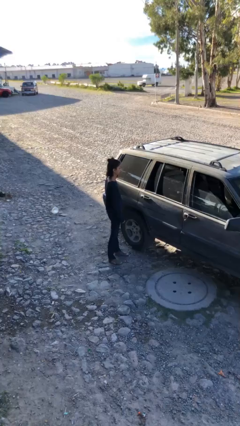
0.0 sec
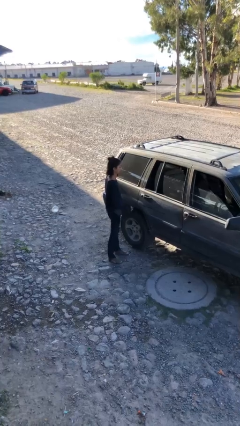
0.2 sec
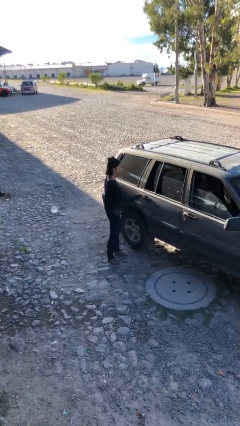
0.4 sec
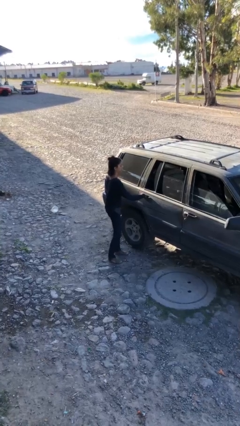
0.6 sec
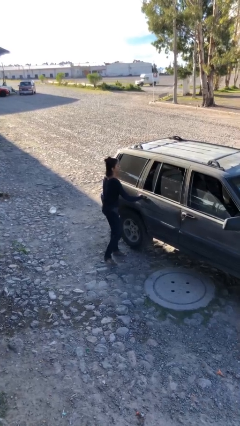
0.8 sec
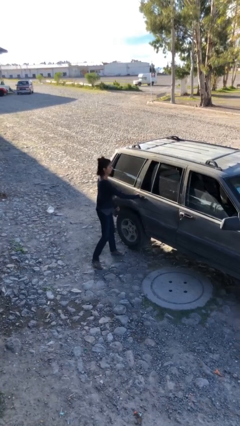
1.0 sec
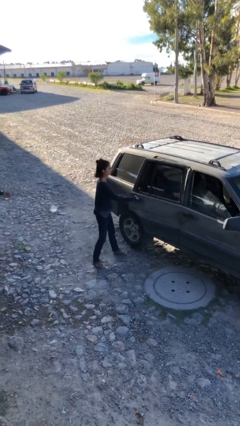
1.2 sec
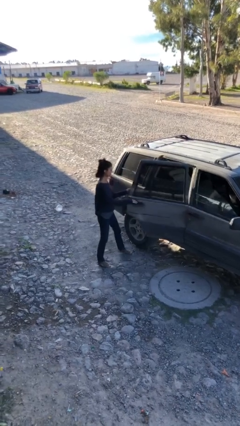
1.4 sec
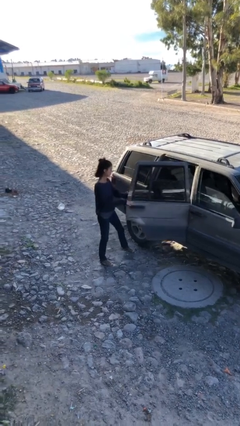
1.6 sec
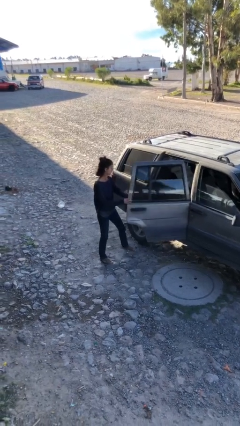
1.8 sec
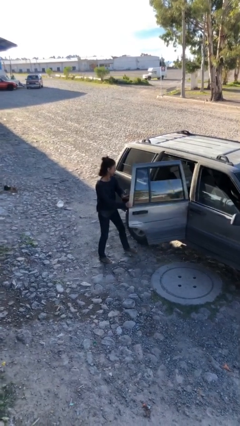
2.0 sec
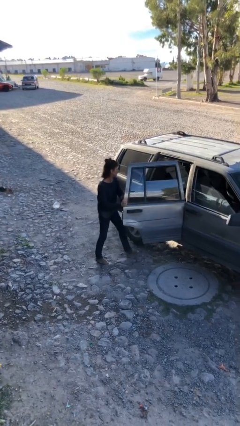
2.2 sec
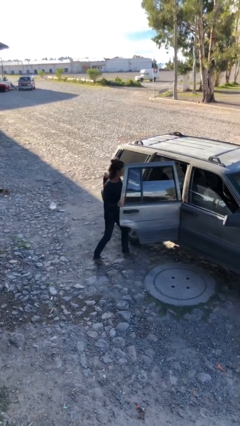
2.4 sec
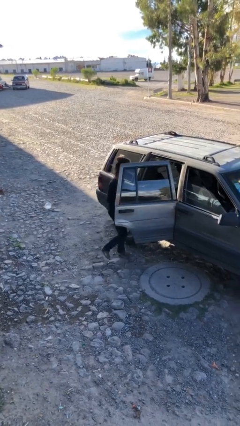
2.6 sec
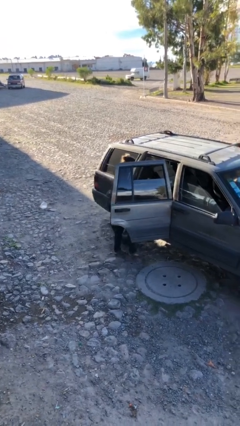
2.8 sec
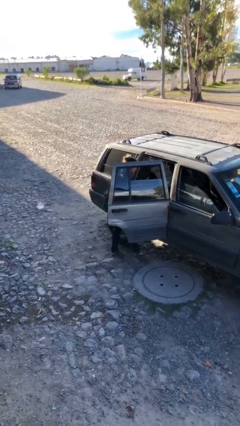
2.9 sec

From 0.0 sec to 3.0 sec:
person opens car door

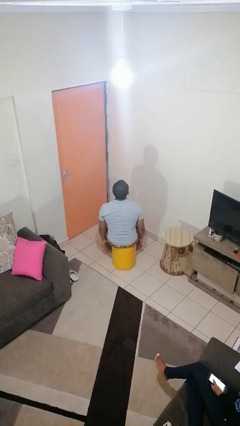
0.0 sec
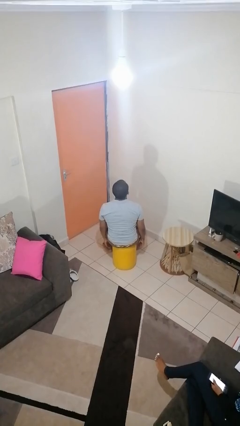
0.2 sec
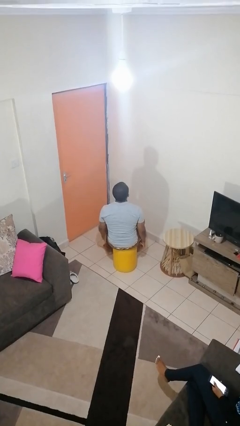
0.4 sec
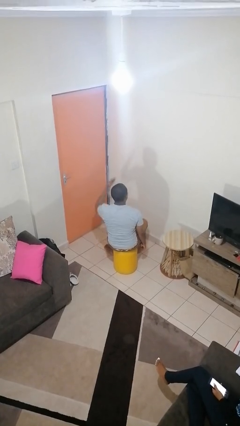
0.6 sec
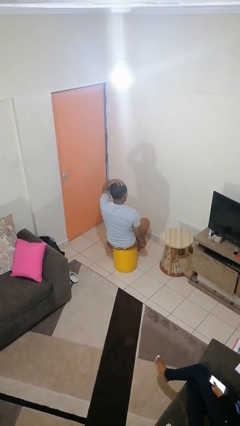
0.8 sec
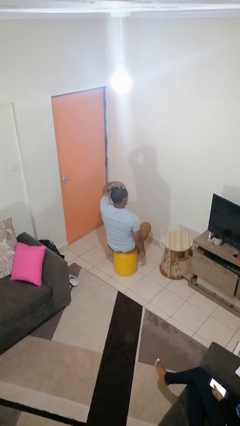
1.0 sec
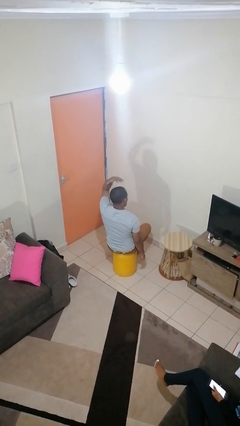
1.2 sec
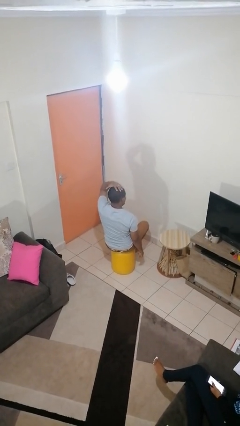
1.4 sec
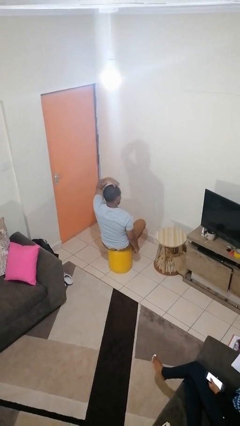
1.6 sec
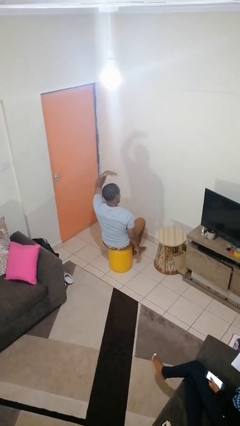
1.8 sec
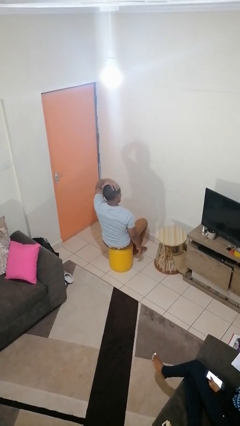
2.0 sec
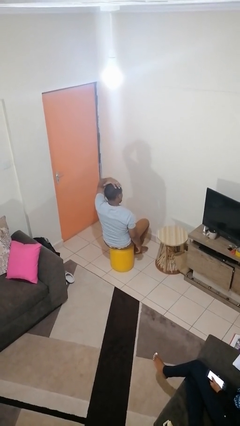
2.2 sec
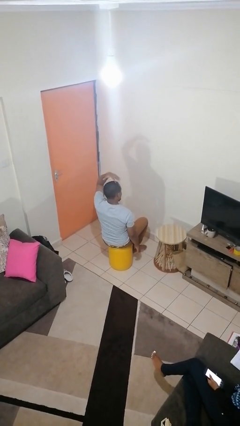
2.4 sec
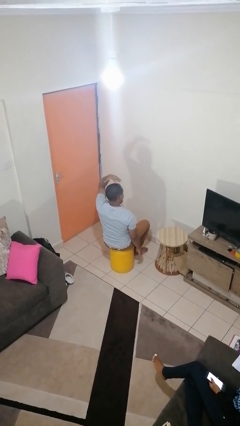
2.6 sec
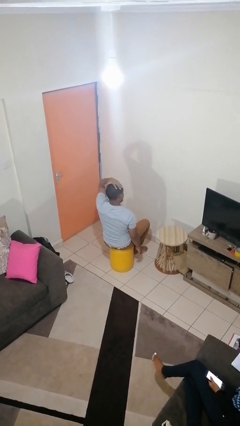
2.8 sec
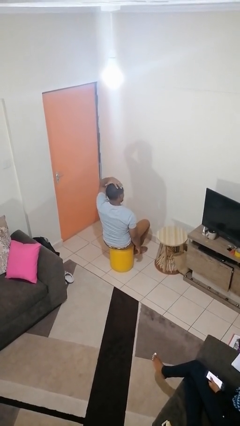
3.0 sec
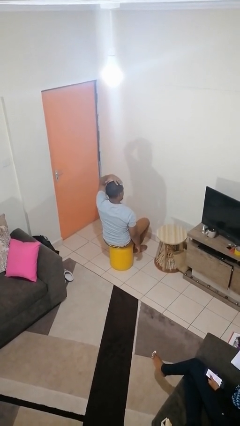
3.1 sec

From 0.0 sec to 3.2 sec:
person pats head

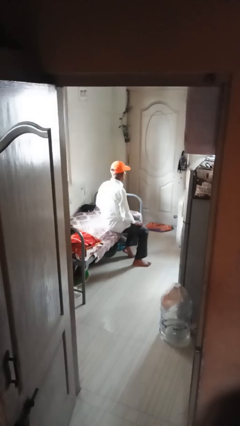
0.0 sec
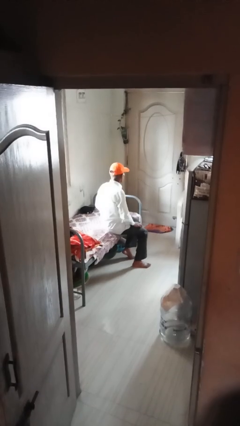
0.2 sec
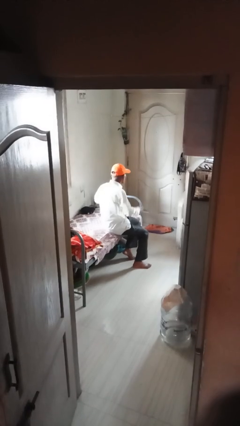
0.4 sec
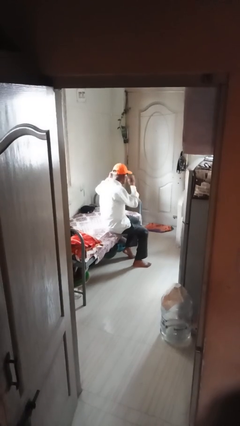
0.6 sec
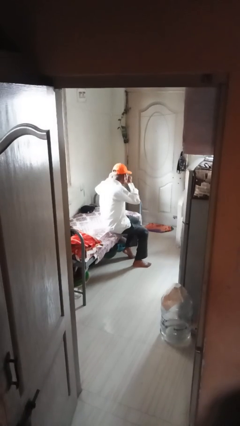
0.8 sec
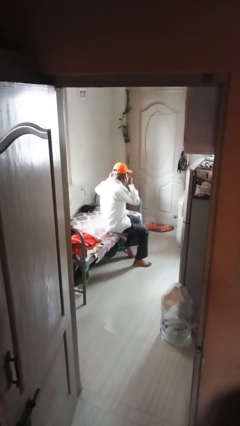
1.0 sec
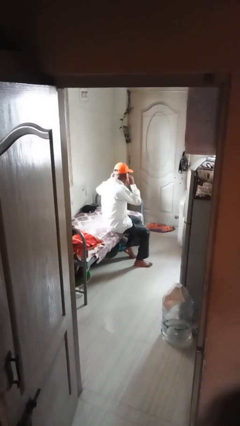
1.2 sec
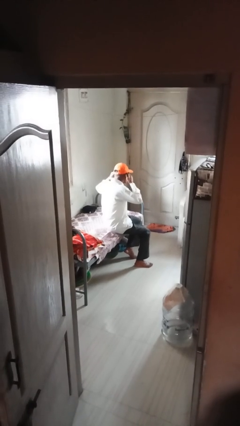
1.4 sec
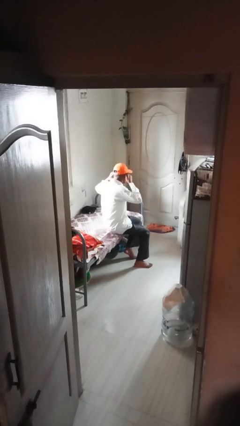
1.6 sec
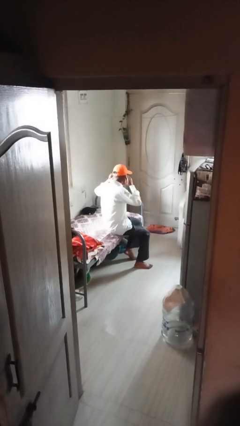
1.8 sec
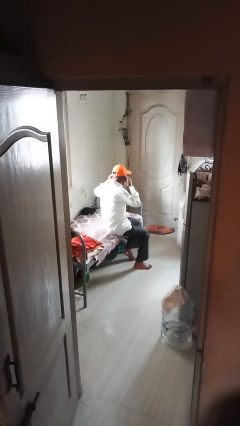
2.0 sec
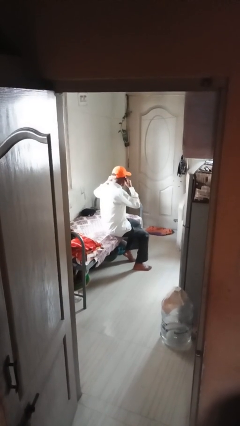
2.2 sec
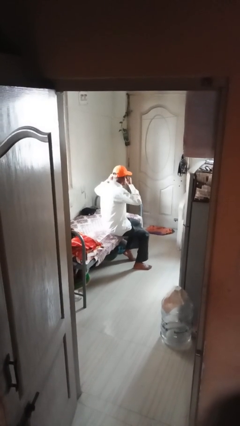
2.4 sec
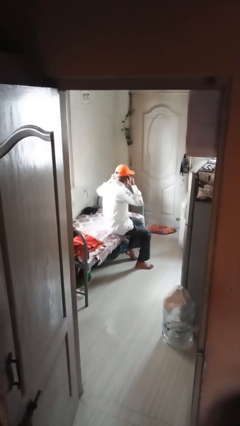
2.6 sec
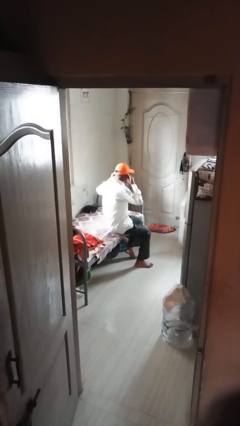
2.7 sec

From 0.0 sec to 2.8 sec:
person touches earlobe

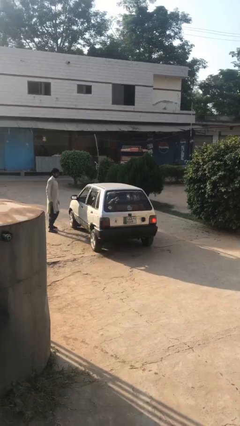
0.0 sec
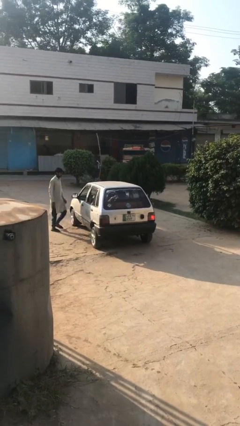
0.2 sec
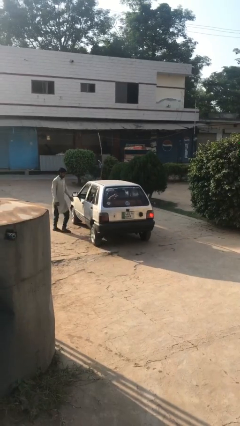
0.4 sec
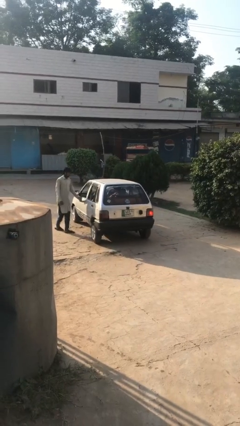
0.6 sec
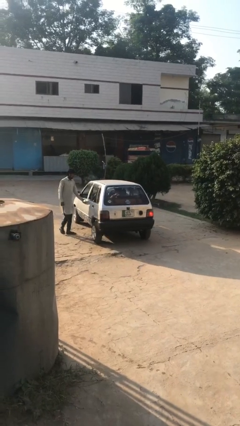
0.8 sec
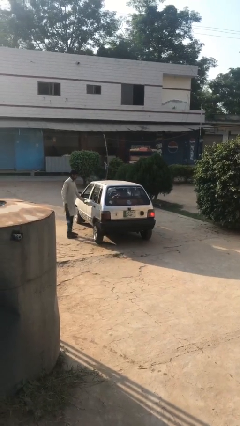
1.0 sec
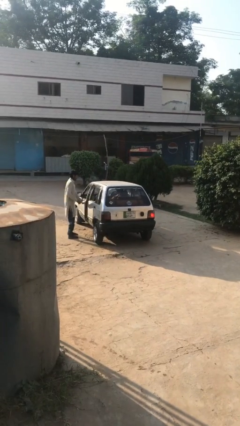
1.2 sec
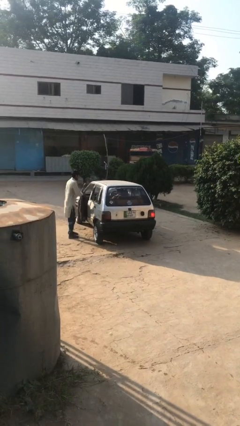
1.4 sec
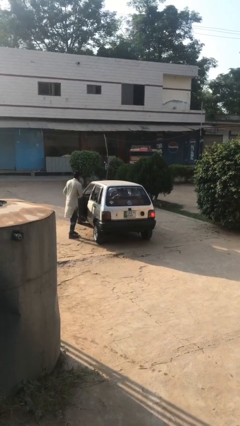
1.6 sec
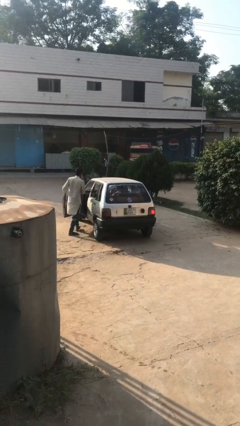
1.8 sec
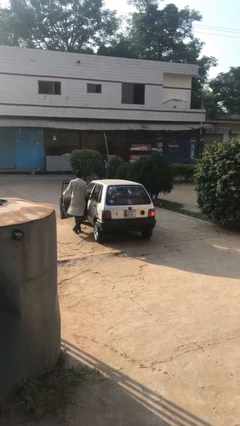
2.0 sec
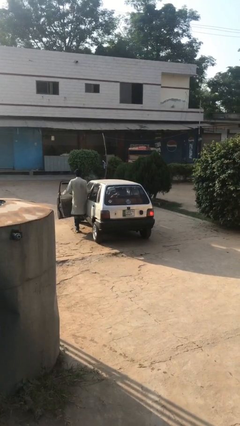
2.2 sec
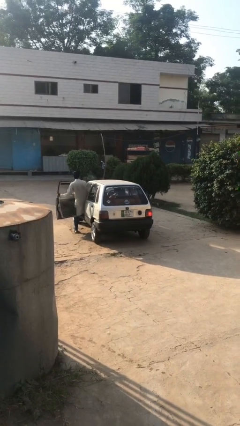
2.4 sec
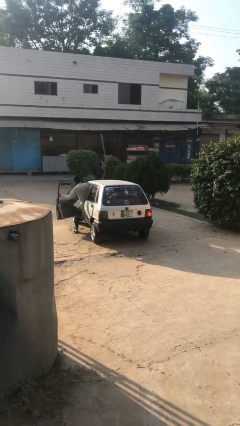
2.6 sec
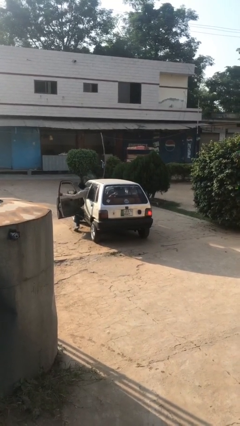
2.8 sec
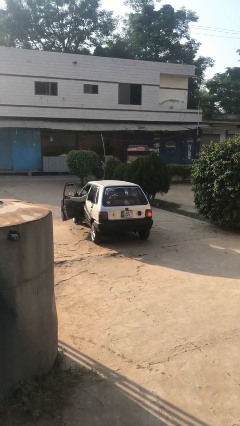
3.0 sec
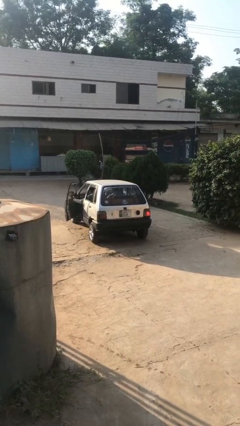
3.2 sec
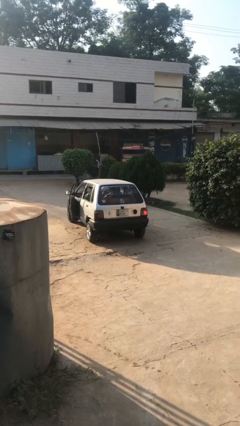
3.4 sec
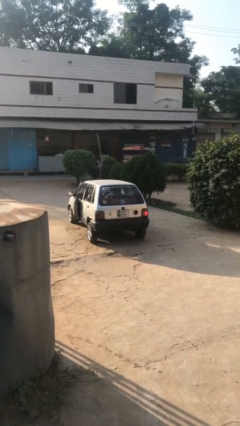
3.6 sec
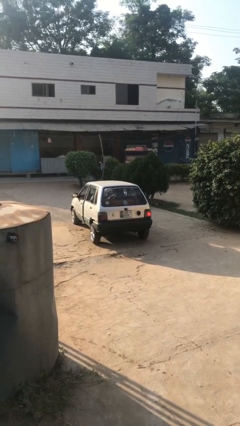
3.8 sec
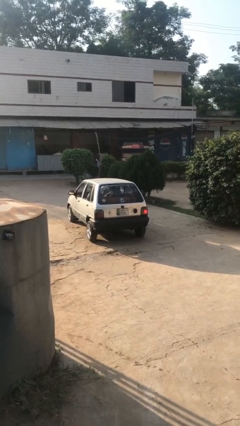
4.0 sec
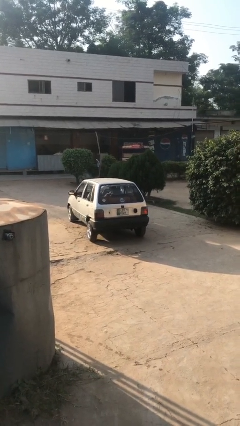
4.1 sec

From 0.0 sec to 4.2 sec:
car picks up person

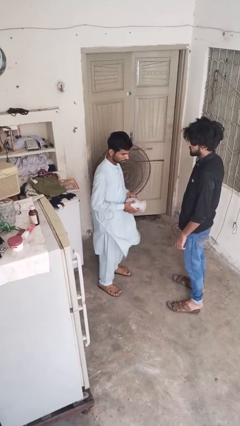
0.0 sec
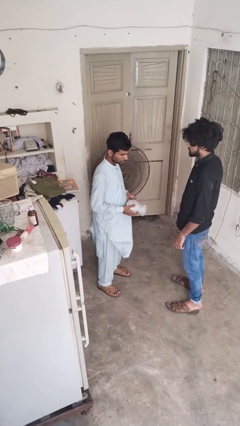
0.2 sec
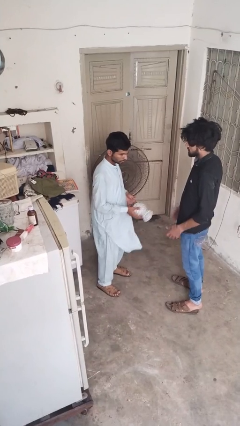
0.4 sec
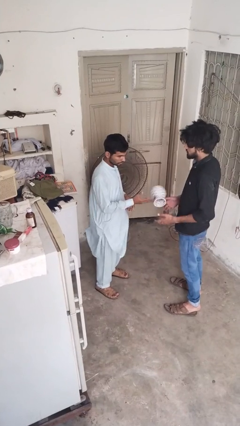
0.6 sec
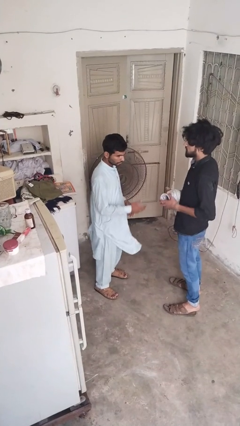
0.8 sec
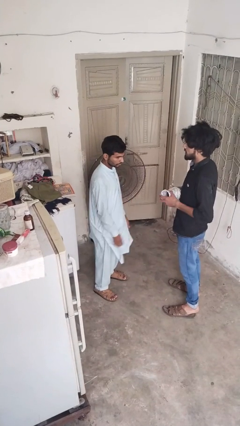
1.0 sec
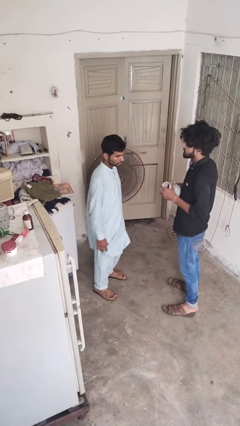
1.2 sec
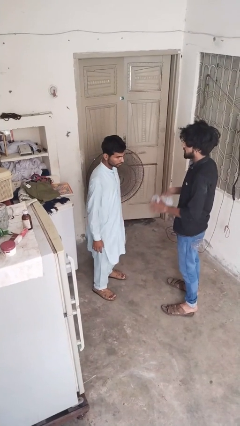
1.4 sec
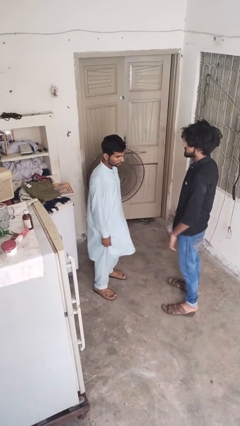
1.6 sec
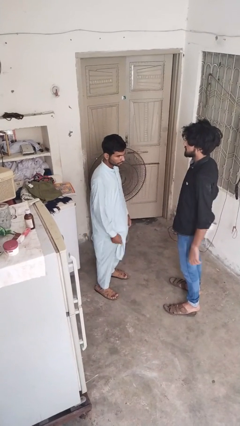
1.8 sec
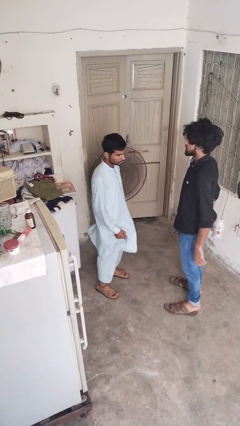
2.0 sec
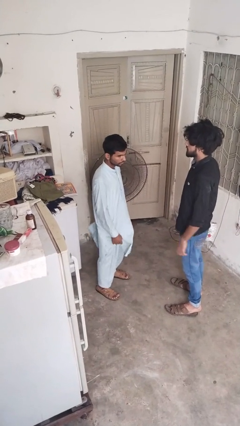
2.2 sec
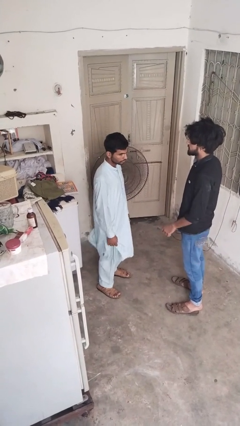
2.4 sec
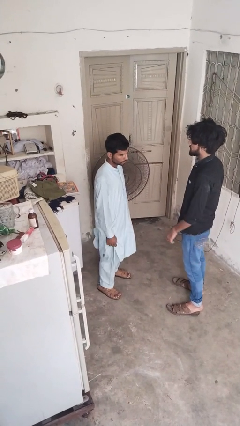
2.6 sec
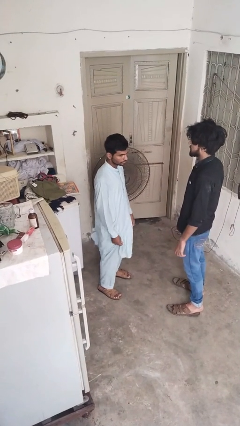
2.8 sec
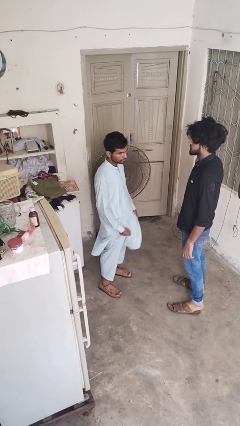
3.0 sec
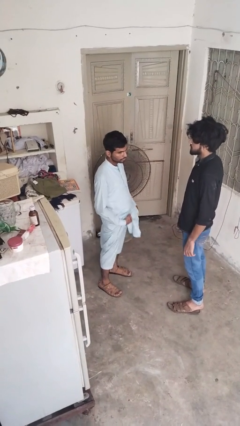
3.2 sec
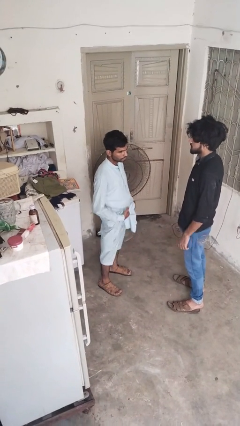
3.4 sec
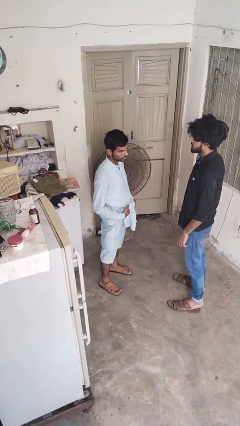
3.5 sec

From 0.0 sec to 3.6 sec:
person throws object to person

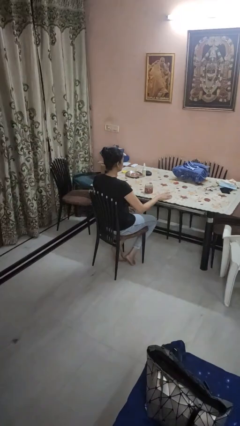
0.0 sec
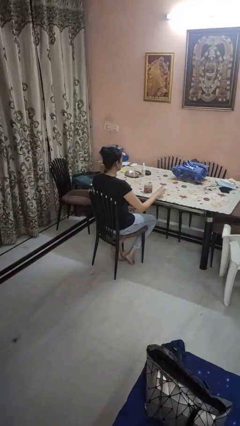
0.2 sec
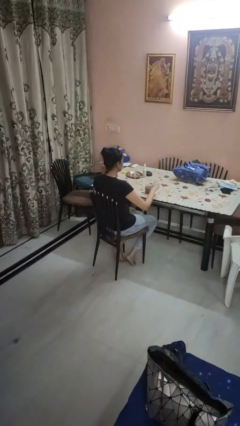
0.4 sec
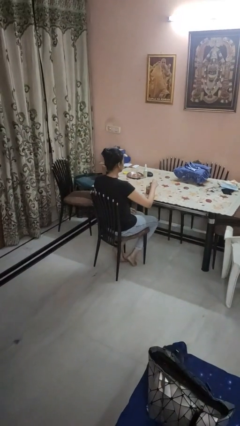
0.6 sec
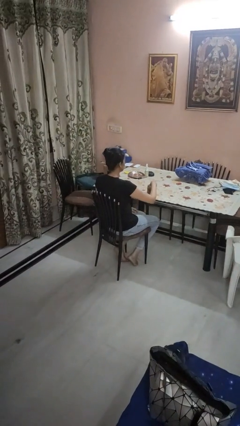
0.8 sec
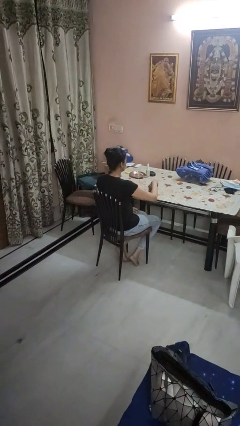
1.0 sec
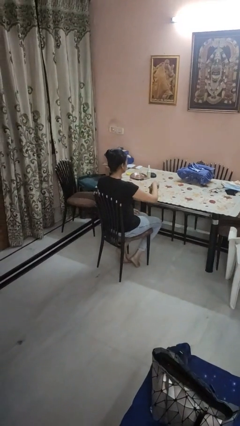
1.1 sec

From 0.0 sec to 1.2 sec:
person closes jar
